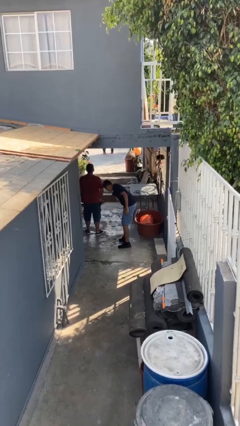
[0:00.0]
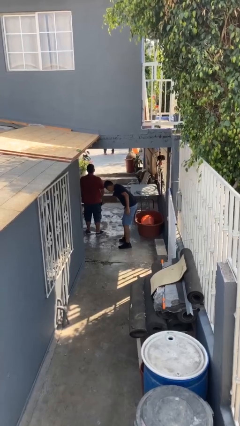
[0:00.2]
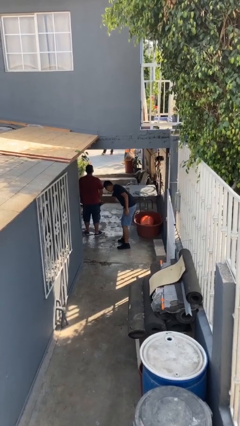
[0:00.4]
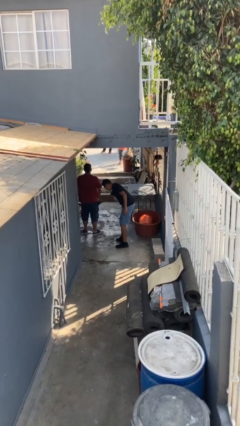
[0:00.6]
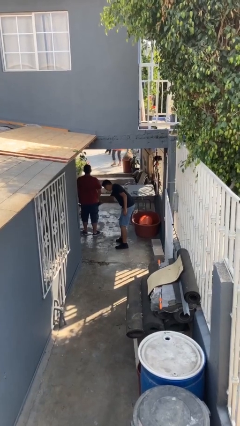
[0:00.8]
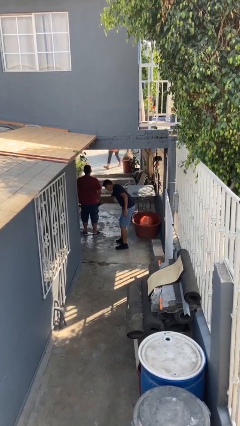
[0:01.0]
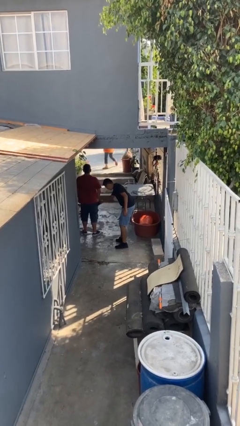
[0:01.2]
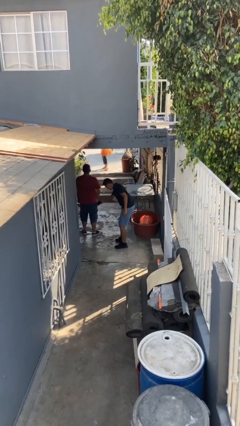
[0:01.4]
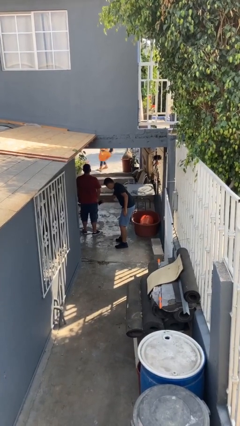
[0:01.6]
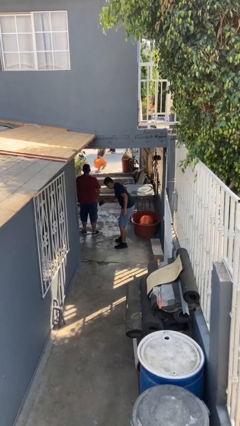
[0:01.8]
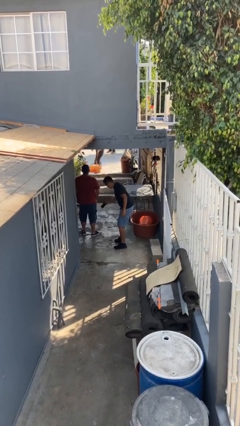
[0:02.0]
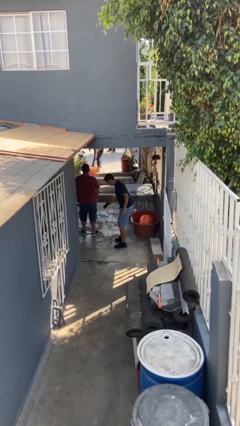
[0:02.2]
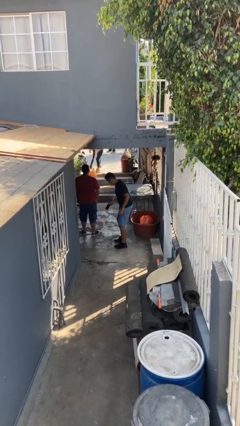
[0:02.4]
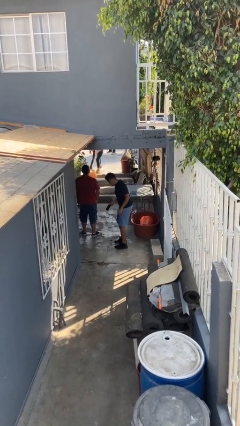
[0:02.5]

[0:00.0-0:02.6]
person steals object from person

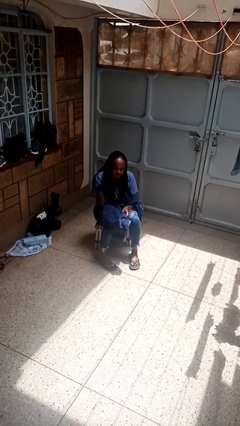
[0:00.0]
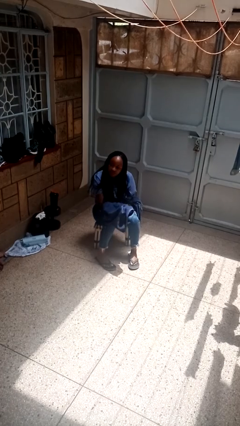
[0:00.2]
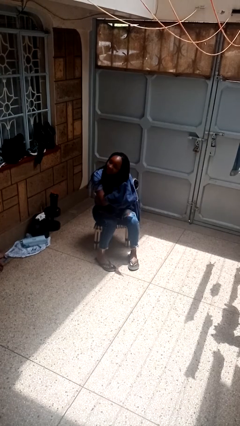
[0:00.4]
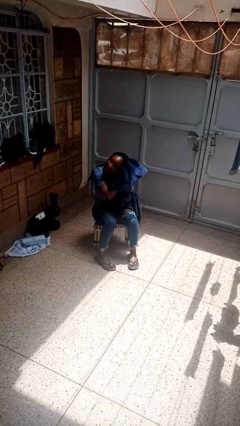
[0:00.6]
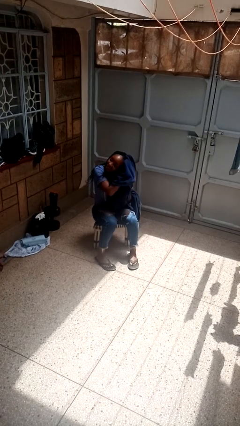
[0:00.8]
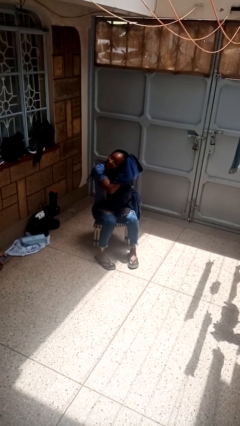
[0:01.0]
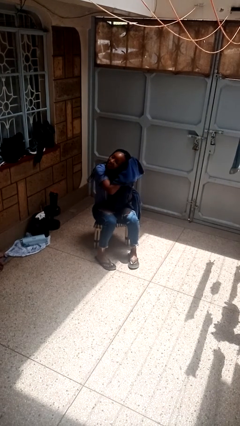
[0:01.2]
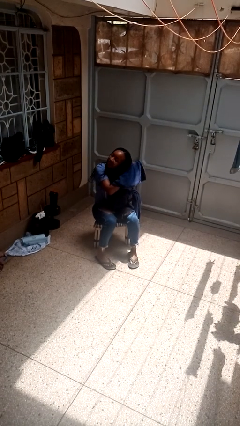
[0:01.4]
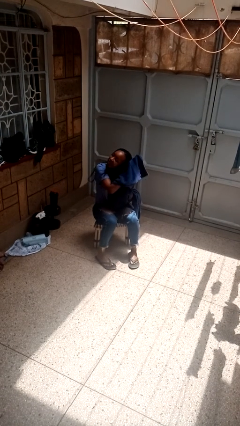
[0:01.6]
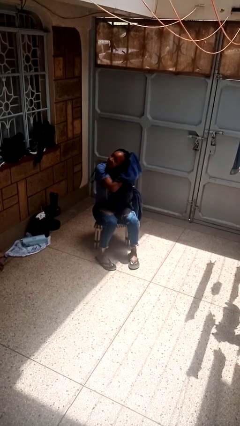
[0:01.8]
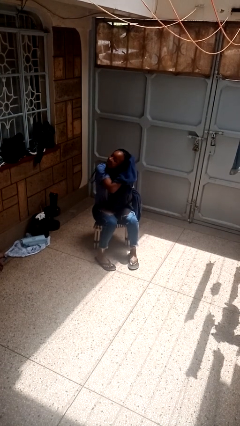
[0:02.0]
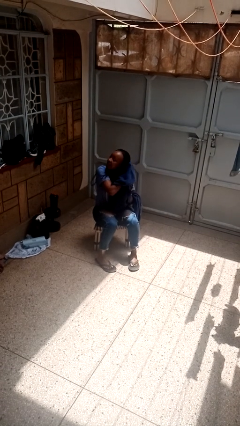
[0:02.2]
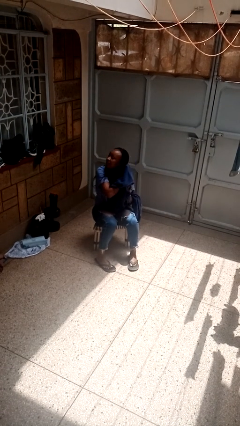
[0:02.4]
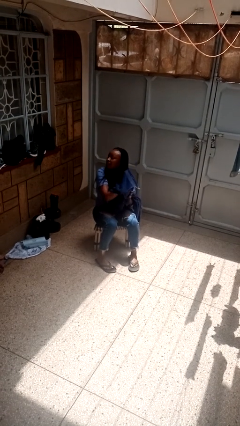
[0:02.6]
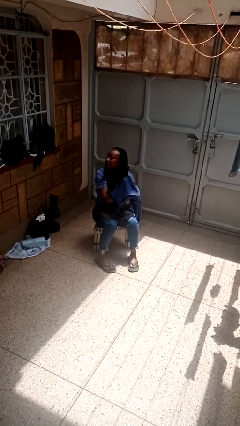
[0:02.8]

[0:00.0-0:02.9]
person dries hair with towel

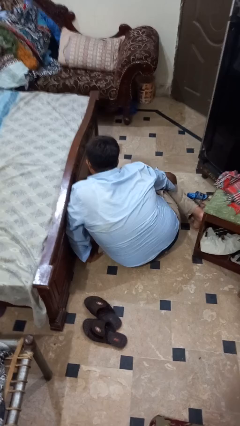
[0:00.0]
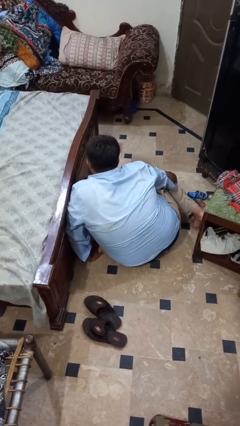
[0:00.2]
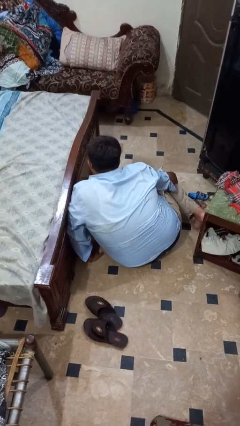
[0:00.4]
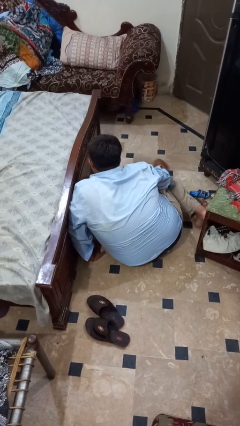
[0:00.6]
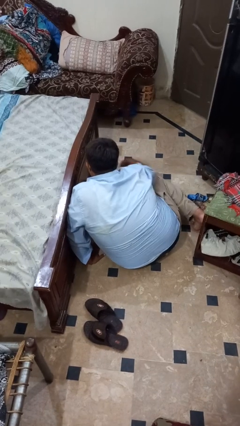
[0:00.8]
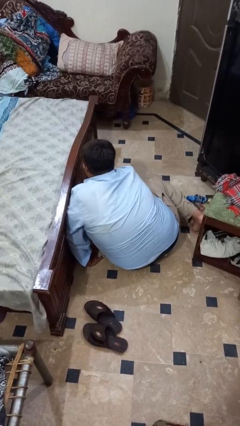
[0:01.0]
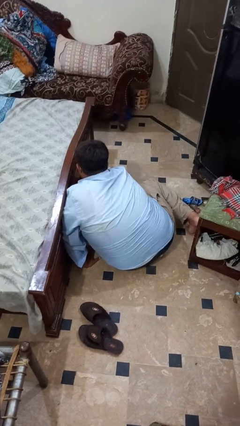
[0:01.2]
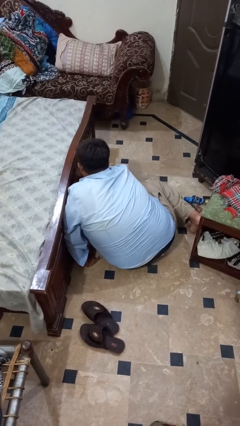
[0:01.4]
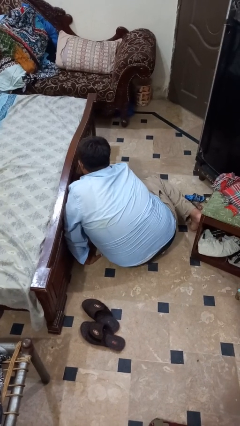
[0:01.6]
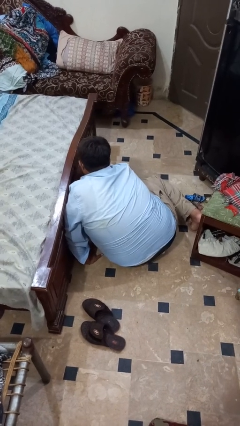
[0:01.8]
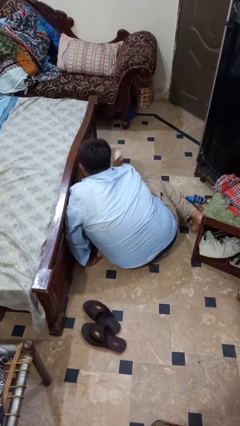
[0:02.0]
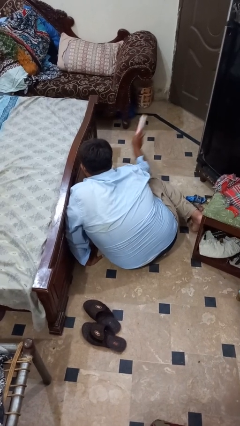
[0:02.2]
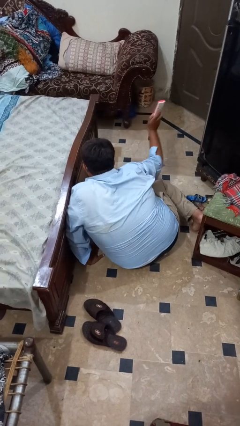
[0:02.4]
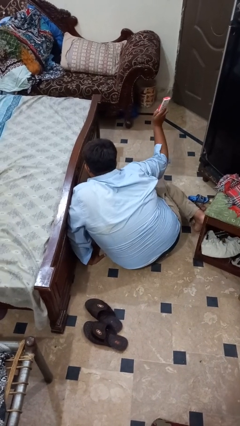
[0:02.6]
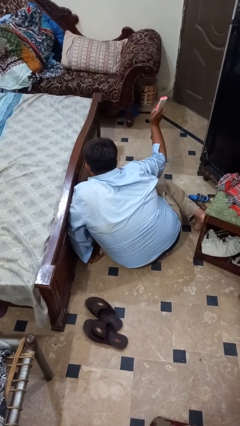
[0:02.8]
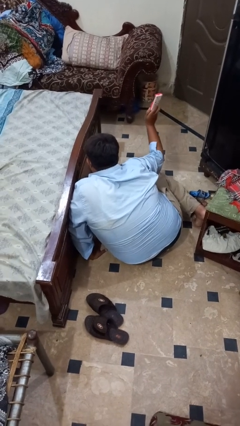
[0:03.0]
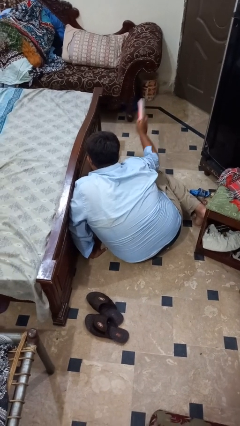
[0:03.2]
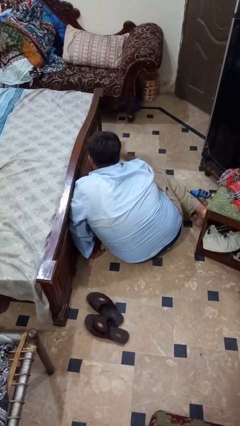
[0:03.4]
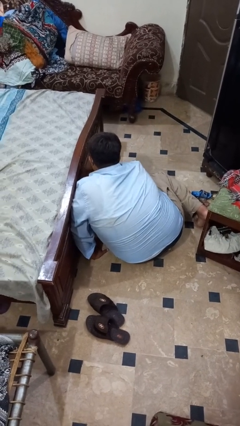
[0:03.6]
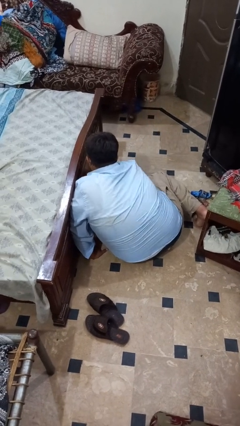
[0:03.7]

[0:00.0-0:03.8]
person searches under bed

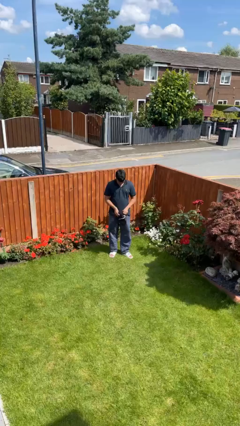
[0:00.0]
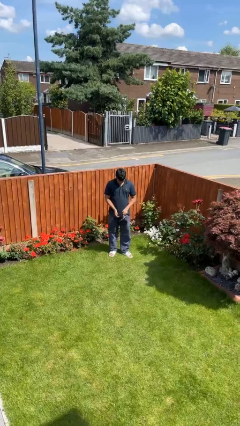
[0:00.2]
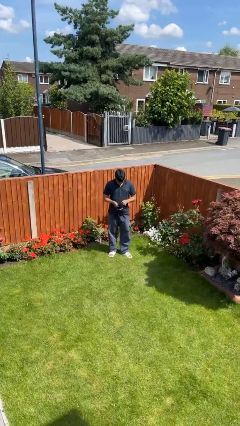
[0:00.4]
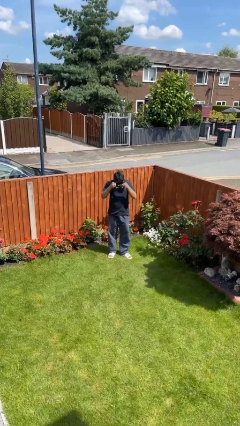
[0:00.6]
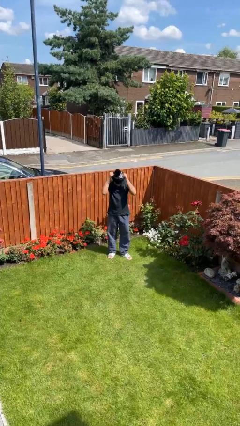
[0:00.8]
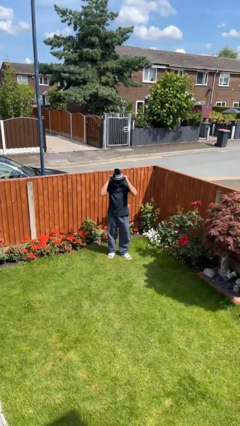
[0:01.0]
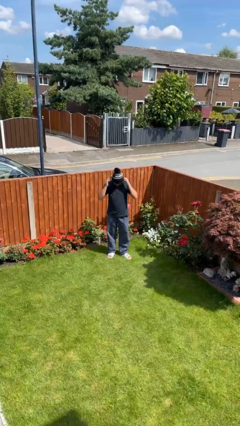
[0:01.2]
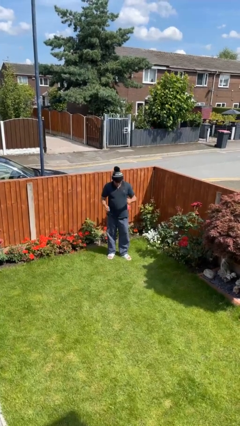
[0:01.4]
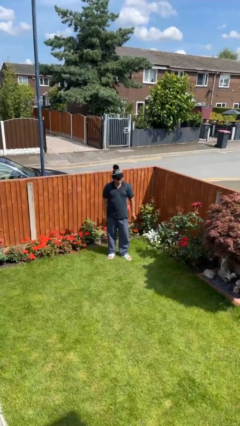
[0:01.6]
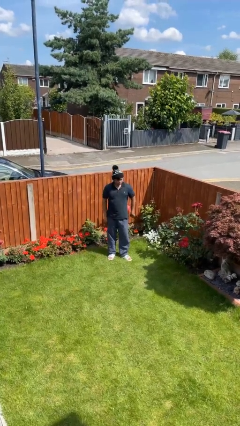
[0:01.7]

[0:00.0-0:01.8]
person puts on hat

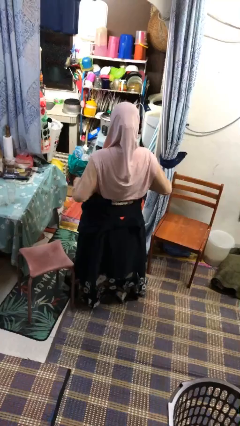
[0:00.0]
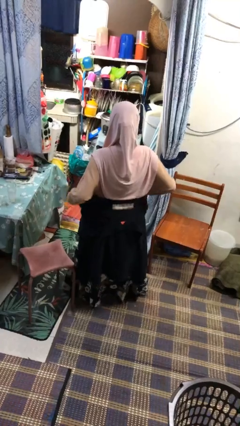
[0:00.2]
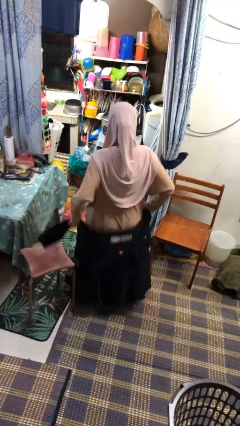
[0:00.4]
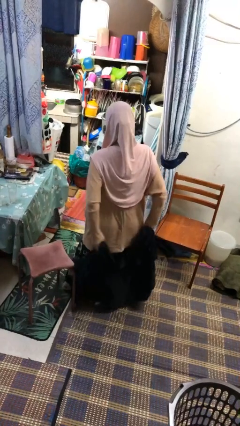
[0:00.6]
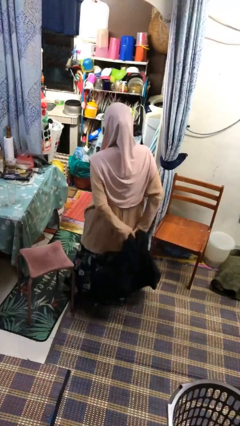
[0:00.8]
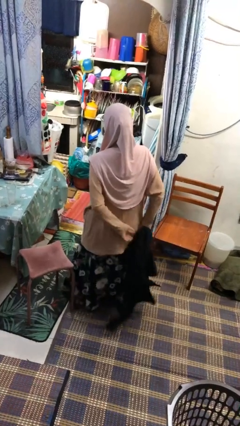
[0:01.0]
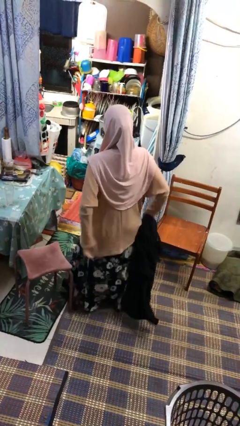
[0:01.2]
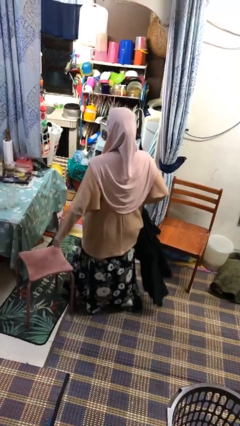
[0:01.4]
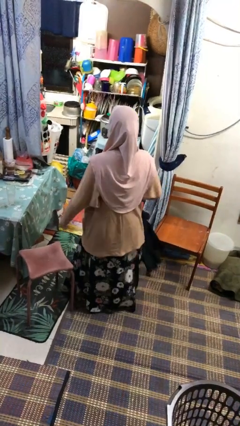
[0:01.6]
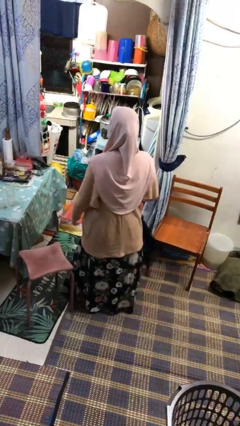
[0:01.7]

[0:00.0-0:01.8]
person unties jacket around waist

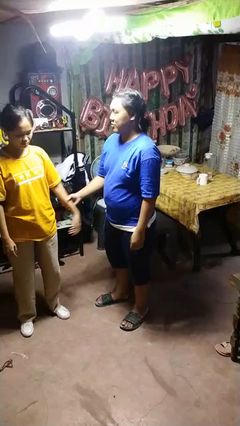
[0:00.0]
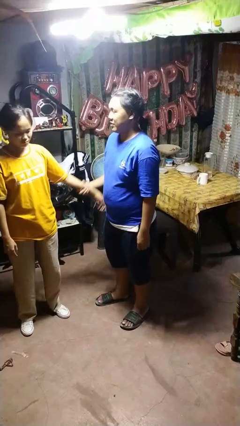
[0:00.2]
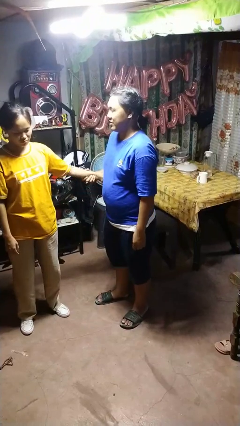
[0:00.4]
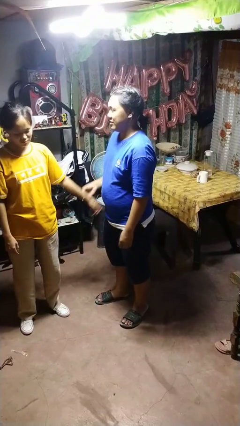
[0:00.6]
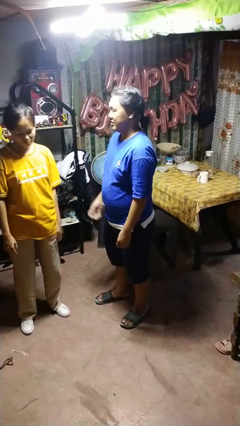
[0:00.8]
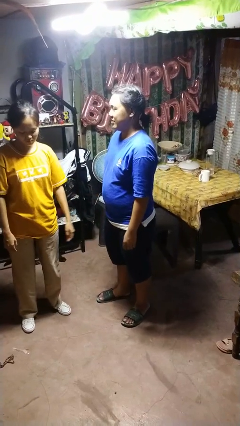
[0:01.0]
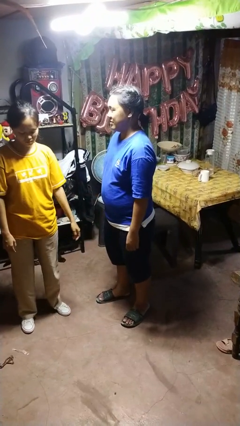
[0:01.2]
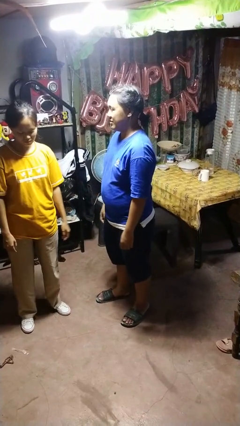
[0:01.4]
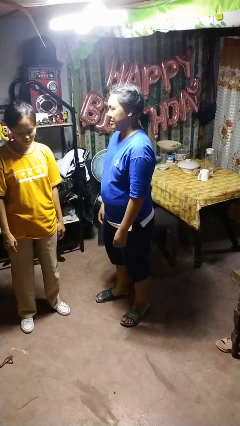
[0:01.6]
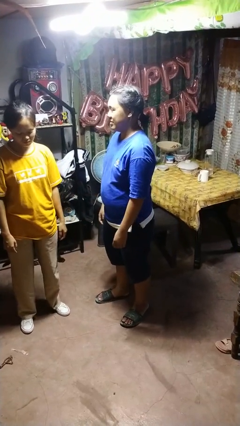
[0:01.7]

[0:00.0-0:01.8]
person grabs person by forearm

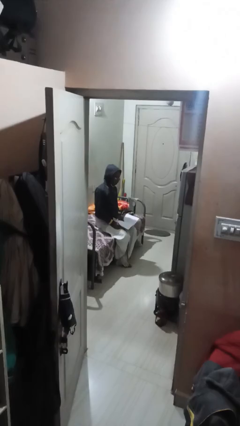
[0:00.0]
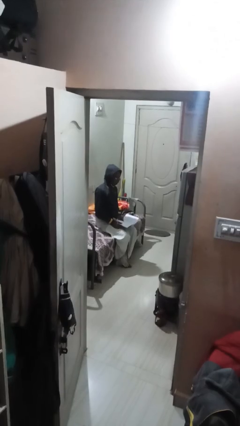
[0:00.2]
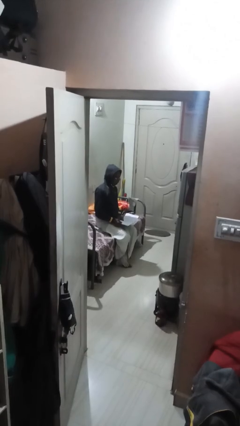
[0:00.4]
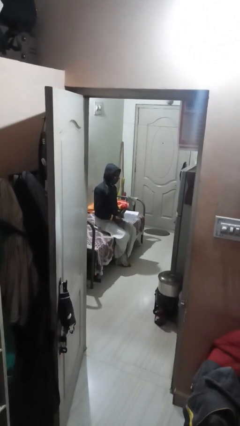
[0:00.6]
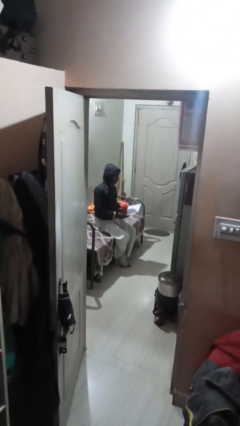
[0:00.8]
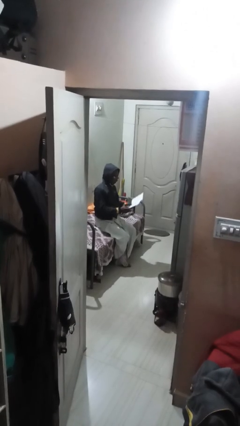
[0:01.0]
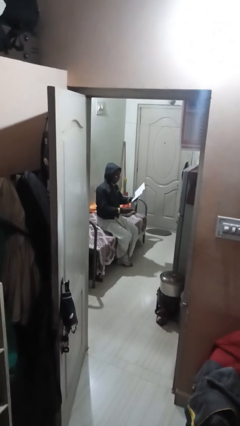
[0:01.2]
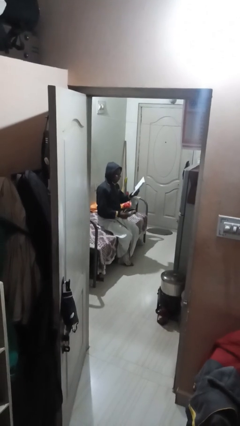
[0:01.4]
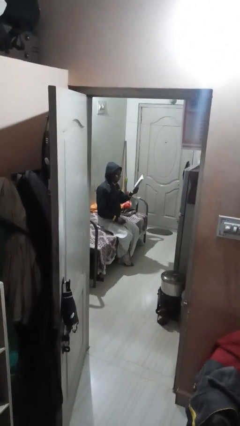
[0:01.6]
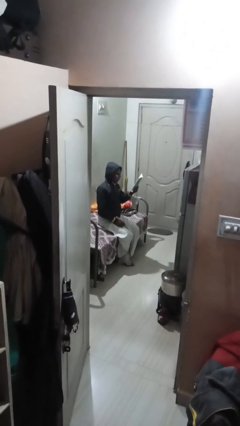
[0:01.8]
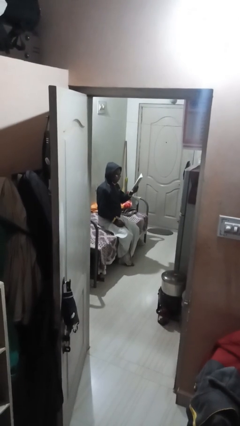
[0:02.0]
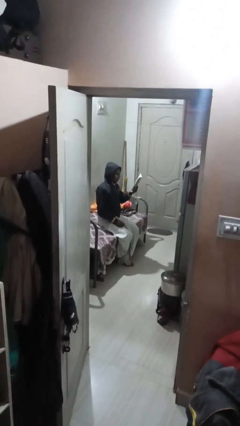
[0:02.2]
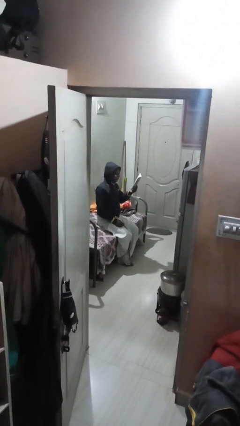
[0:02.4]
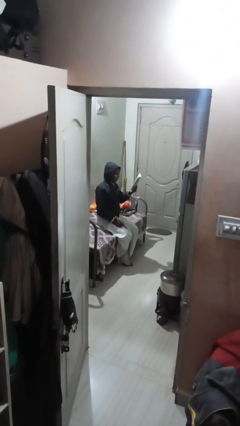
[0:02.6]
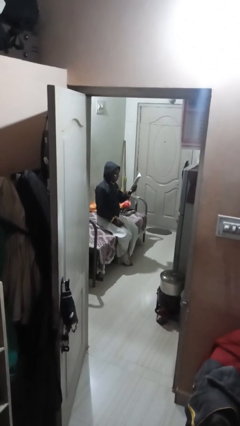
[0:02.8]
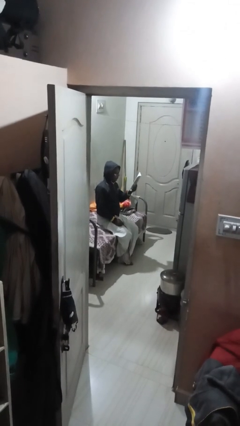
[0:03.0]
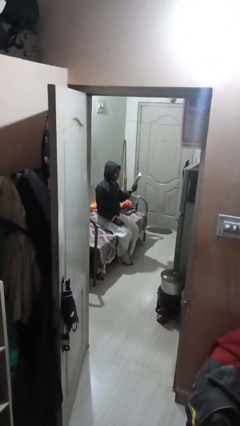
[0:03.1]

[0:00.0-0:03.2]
person reads document
